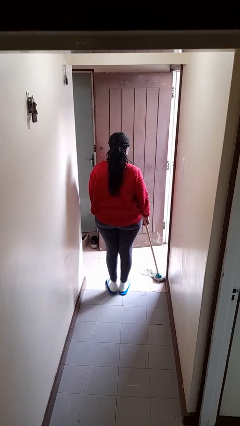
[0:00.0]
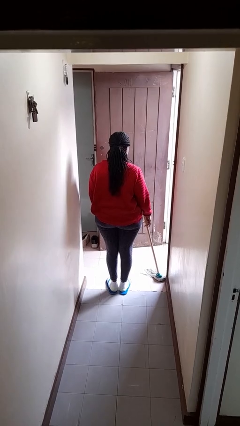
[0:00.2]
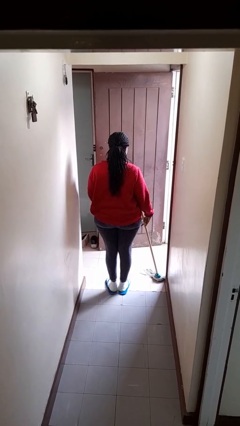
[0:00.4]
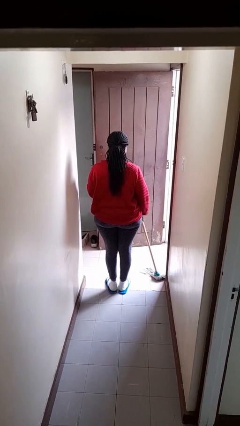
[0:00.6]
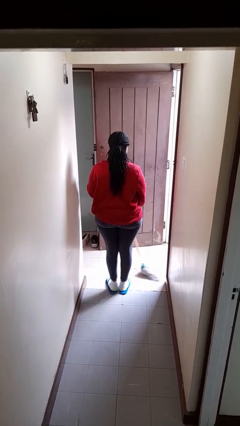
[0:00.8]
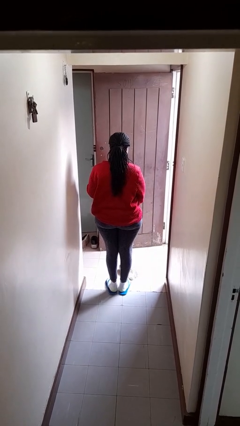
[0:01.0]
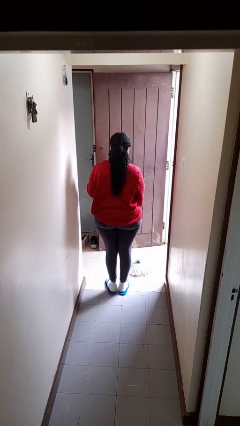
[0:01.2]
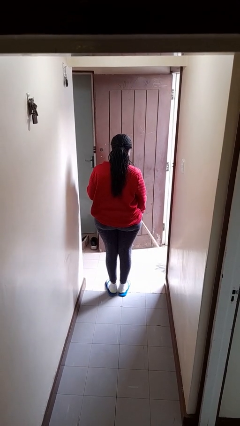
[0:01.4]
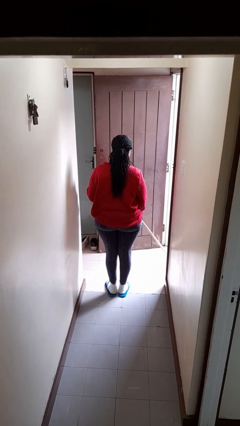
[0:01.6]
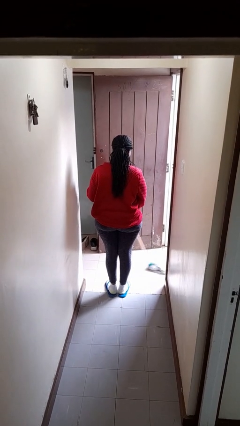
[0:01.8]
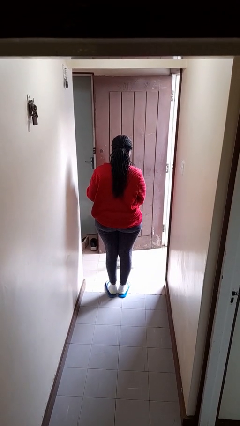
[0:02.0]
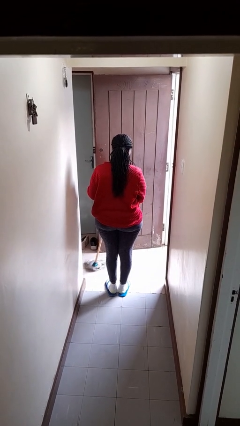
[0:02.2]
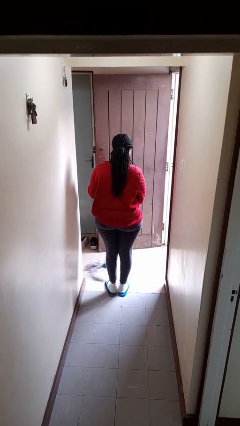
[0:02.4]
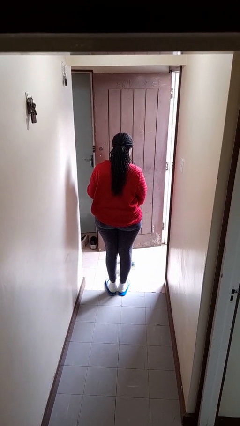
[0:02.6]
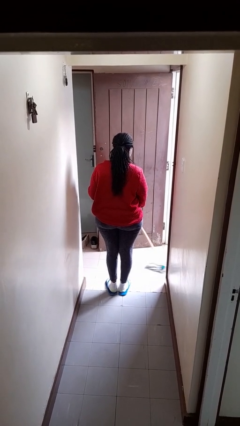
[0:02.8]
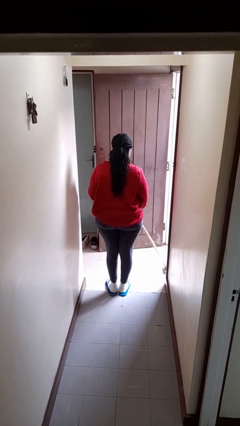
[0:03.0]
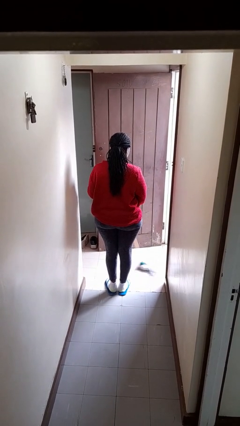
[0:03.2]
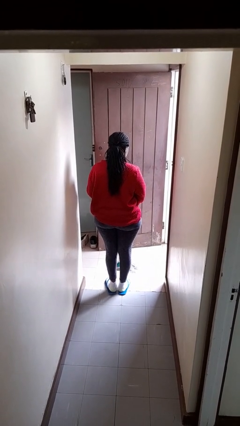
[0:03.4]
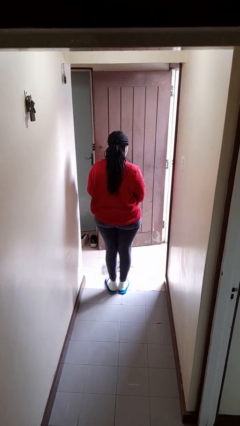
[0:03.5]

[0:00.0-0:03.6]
person mops

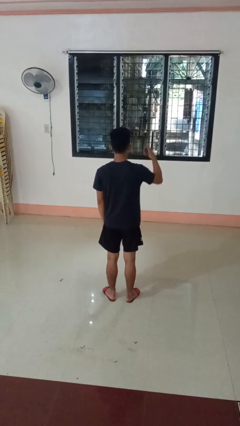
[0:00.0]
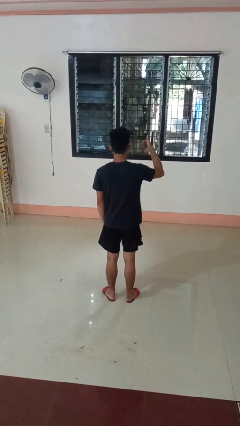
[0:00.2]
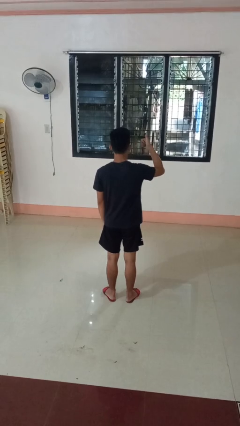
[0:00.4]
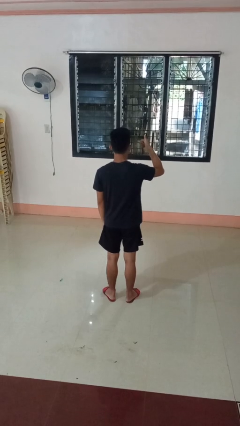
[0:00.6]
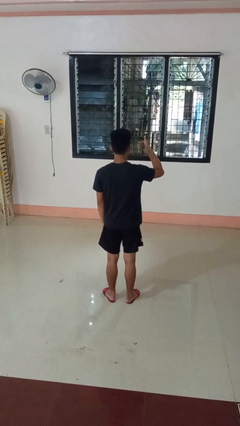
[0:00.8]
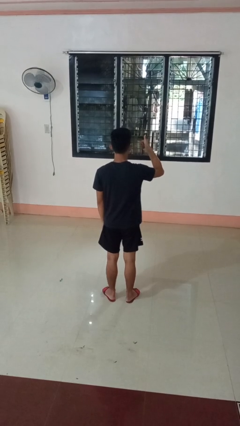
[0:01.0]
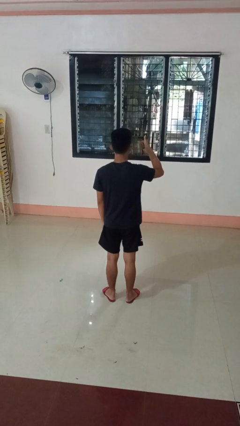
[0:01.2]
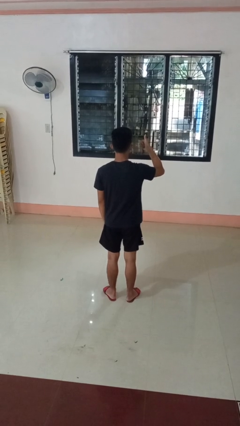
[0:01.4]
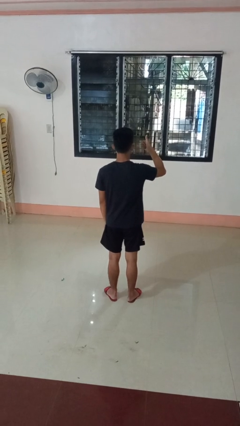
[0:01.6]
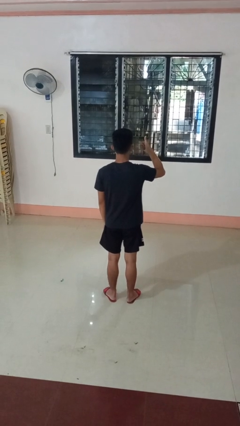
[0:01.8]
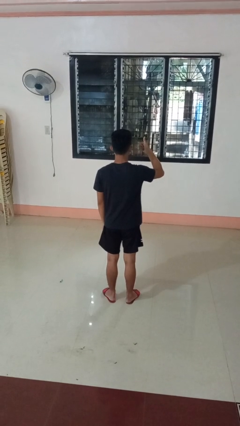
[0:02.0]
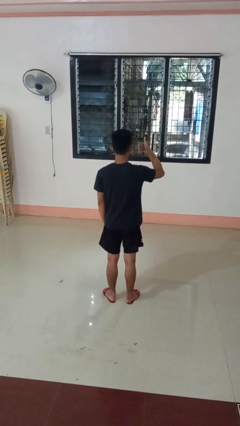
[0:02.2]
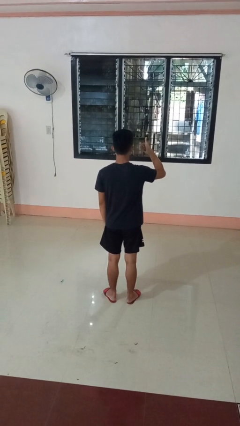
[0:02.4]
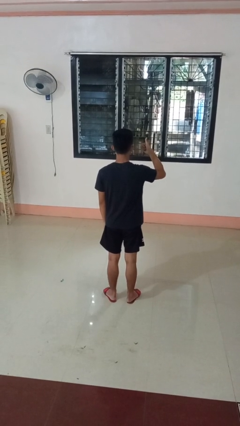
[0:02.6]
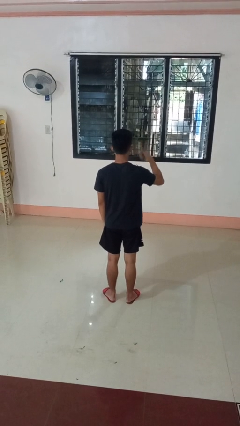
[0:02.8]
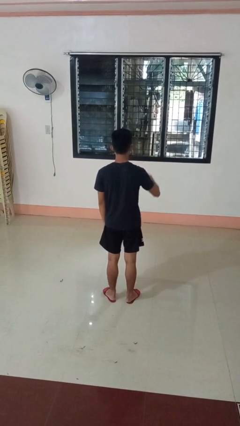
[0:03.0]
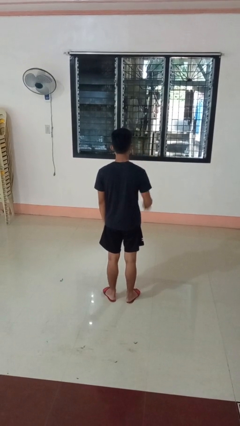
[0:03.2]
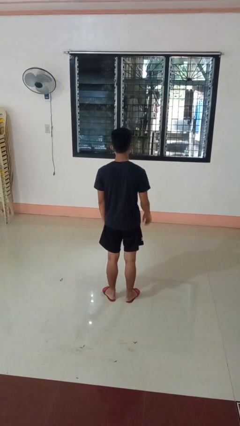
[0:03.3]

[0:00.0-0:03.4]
person gestures thumbs up

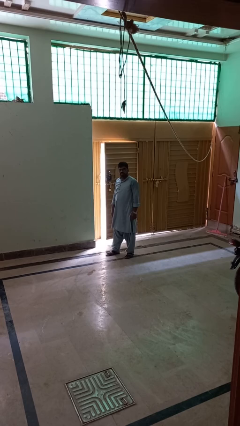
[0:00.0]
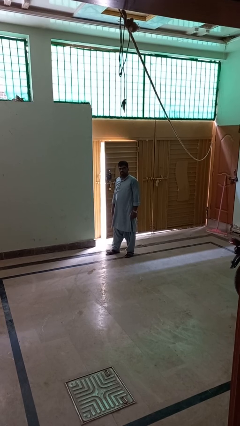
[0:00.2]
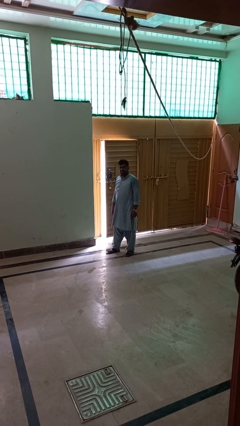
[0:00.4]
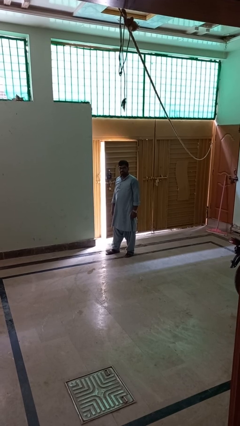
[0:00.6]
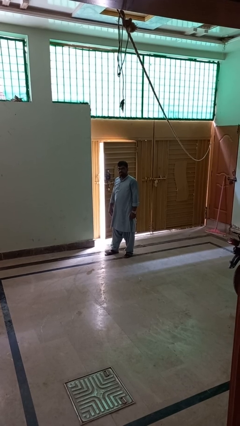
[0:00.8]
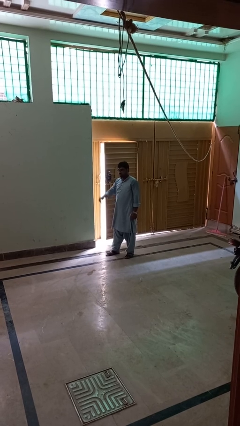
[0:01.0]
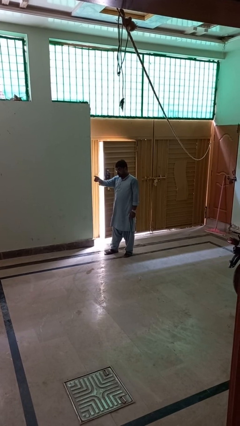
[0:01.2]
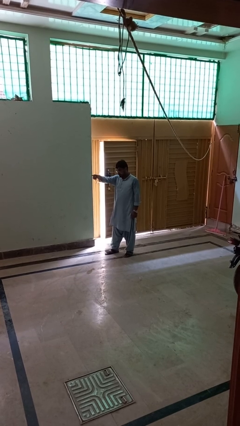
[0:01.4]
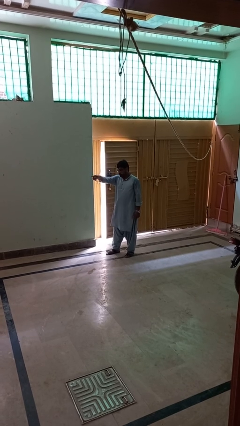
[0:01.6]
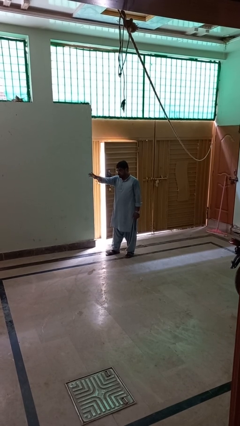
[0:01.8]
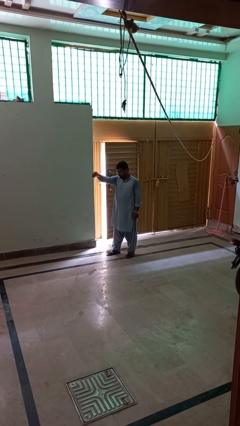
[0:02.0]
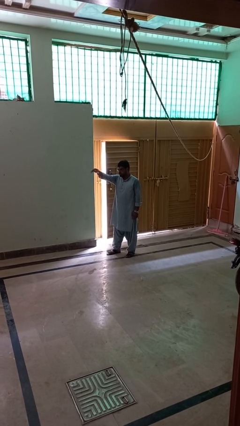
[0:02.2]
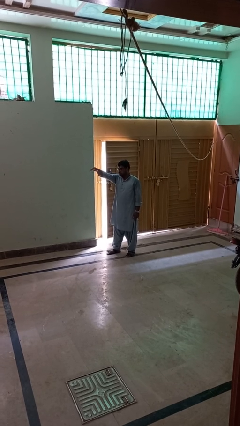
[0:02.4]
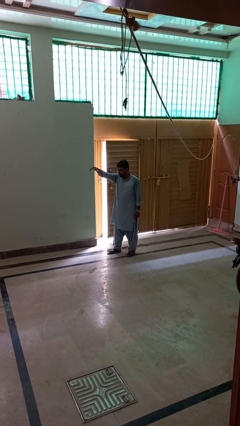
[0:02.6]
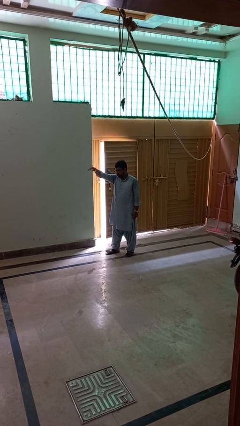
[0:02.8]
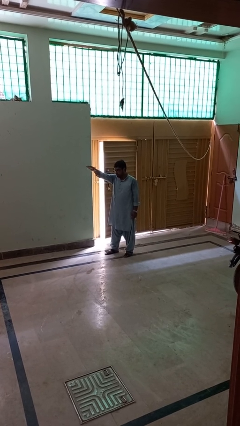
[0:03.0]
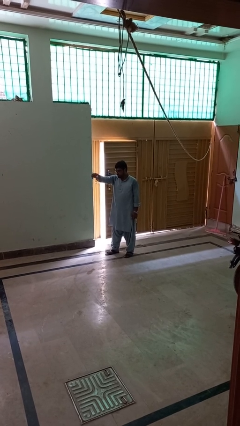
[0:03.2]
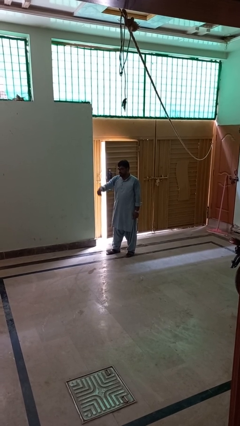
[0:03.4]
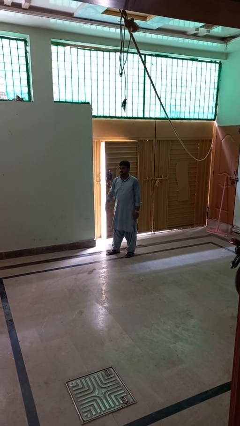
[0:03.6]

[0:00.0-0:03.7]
person gestures come here

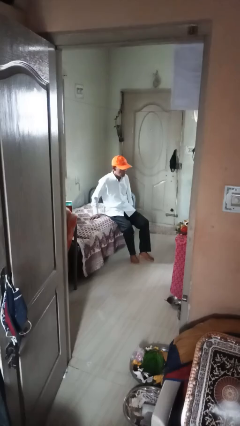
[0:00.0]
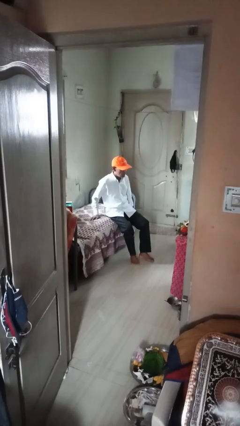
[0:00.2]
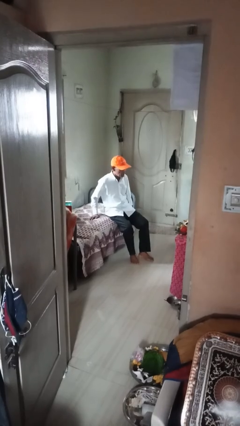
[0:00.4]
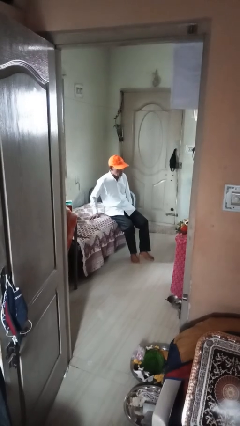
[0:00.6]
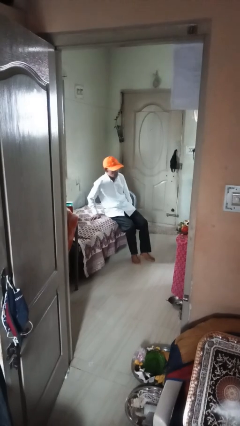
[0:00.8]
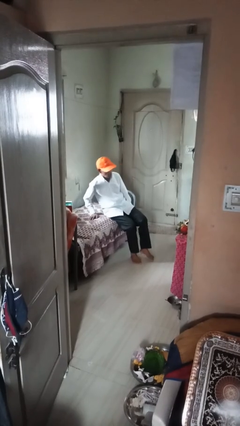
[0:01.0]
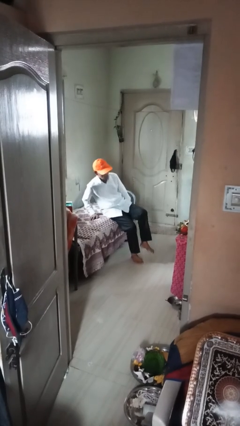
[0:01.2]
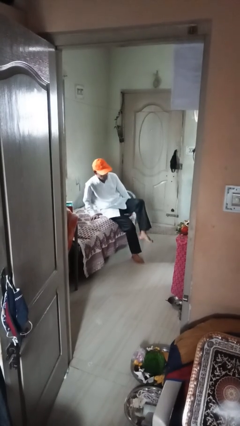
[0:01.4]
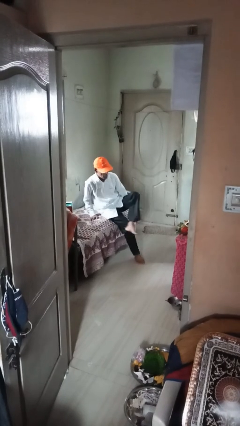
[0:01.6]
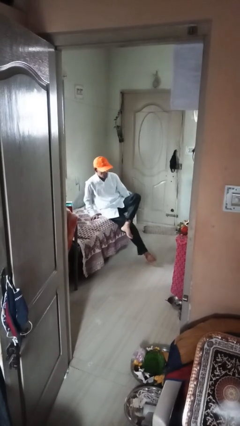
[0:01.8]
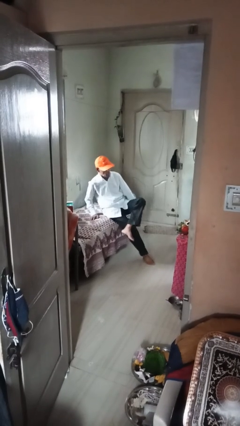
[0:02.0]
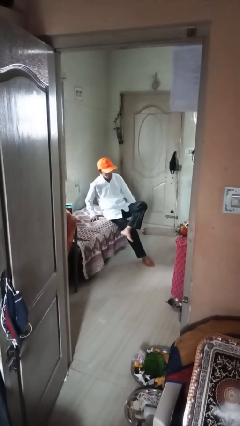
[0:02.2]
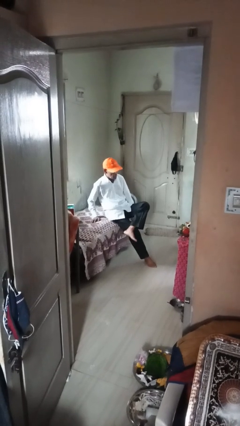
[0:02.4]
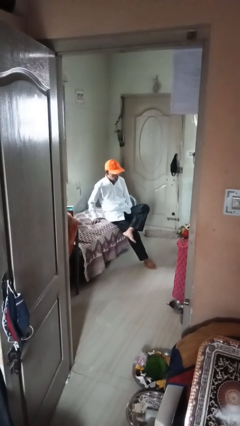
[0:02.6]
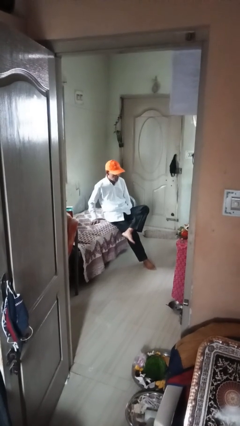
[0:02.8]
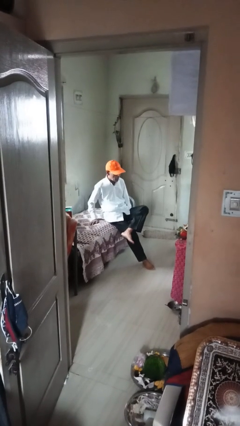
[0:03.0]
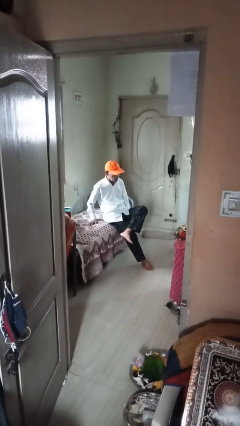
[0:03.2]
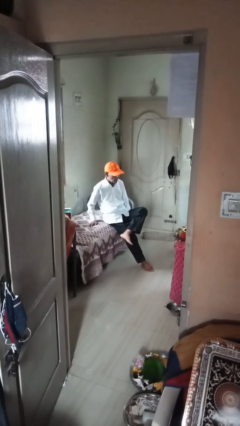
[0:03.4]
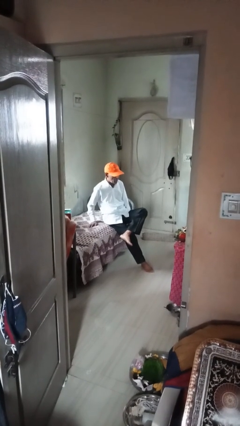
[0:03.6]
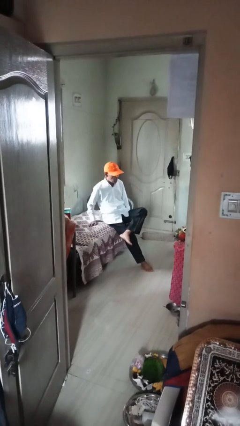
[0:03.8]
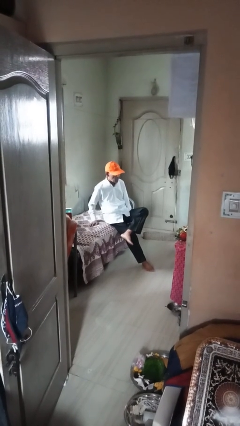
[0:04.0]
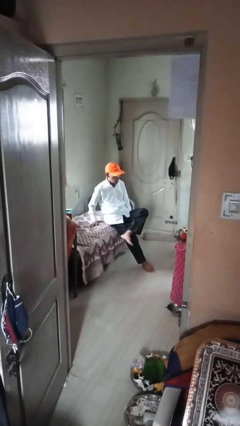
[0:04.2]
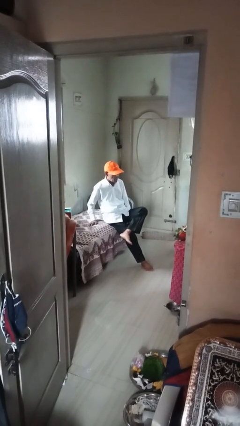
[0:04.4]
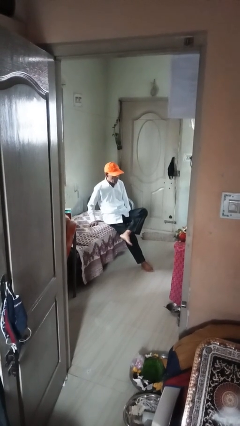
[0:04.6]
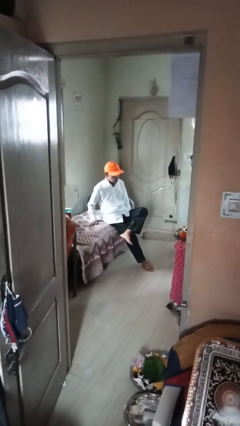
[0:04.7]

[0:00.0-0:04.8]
person crosses legs

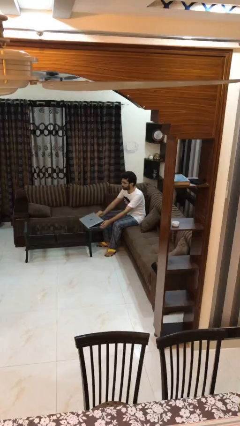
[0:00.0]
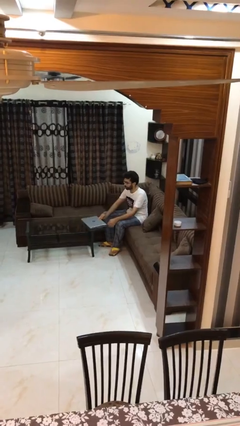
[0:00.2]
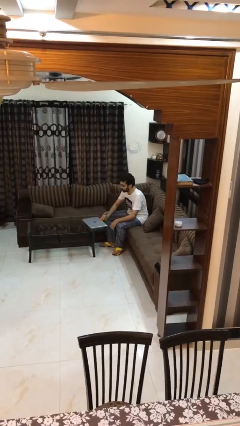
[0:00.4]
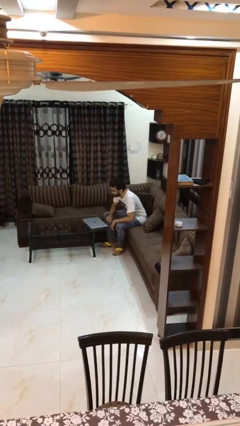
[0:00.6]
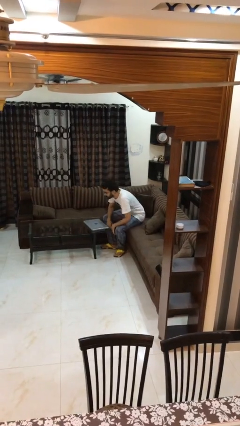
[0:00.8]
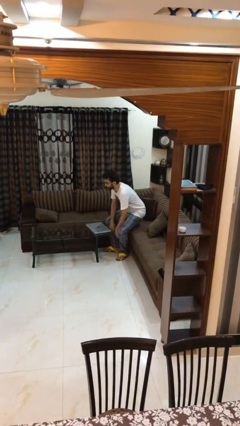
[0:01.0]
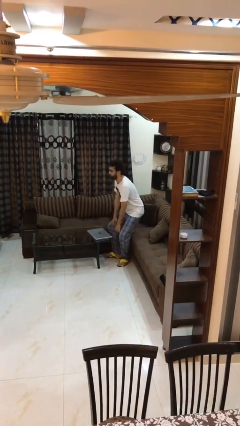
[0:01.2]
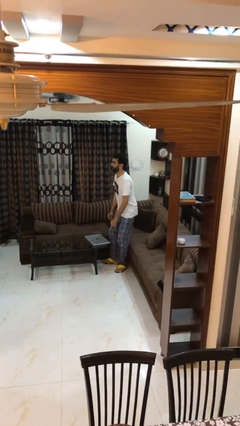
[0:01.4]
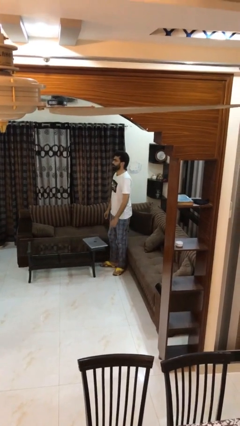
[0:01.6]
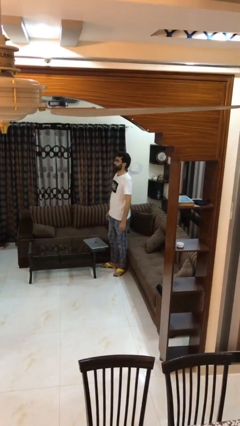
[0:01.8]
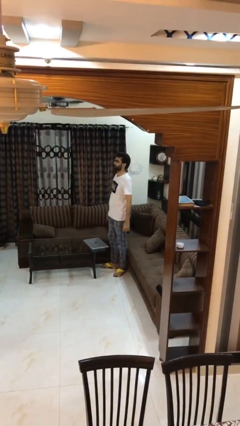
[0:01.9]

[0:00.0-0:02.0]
person stands up
